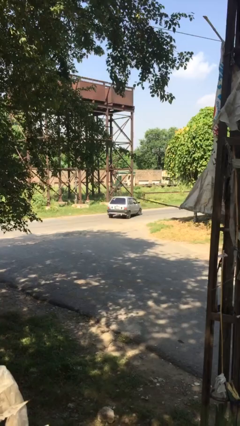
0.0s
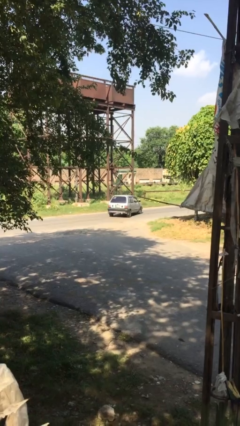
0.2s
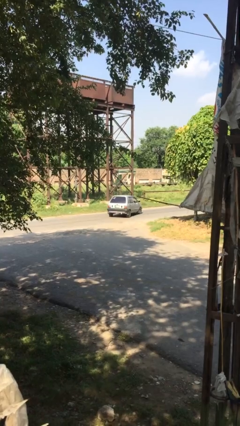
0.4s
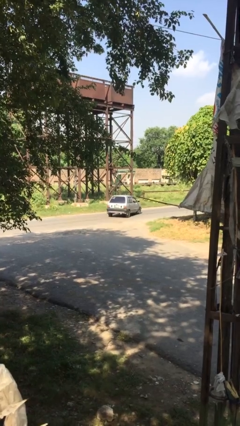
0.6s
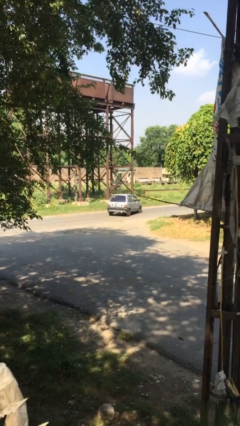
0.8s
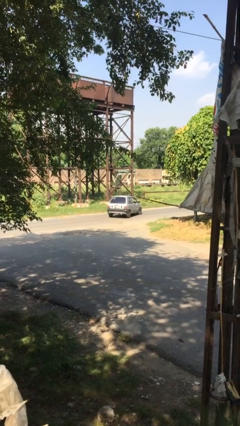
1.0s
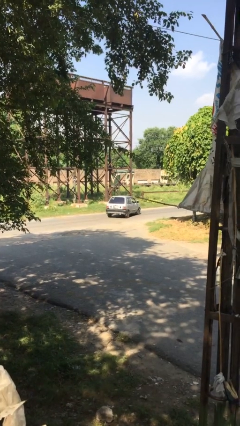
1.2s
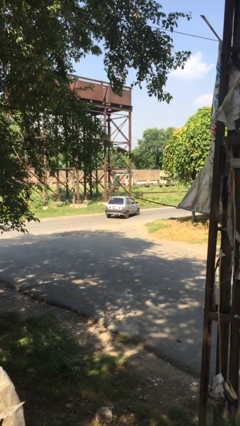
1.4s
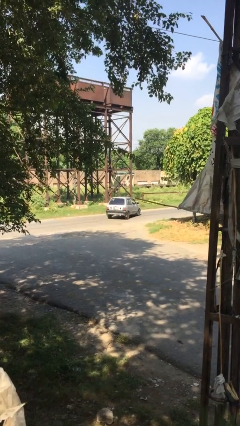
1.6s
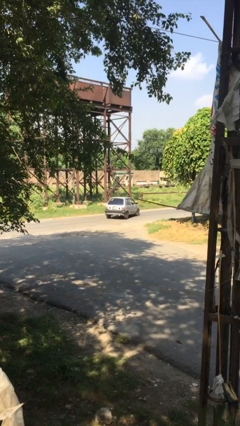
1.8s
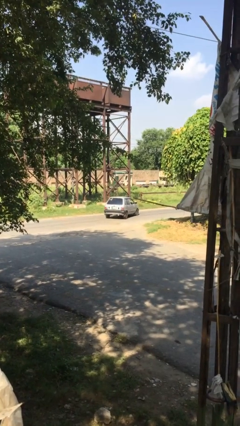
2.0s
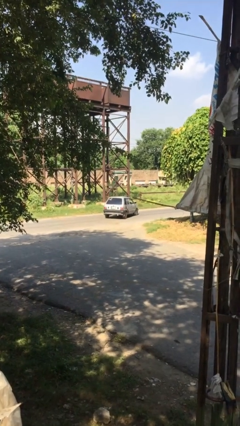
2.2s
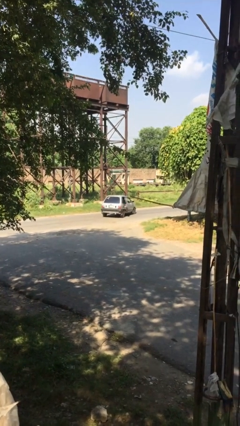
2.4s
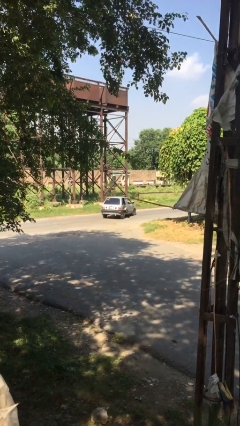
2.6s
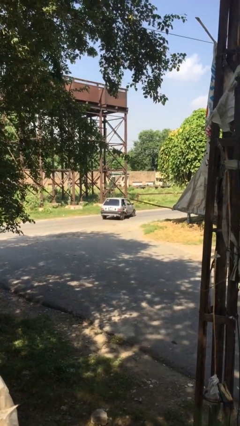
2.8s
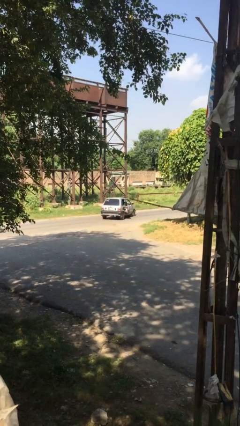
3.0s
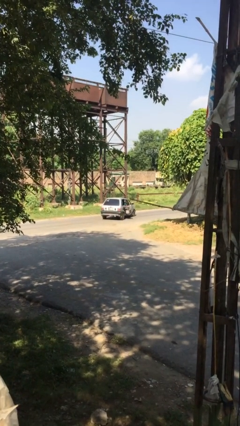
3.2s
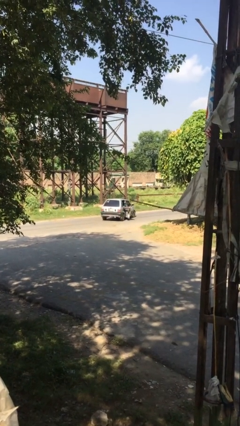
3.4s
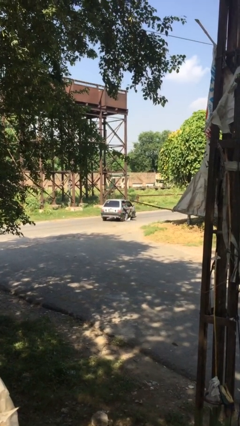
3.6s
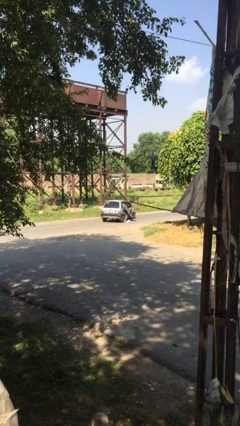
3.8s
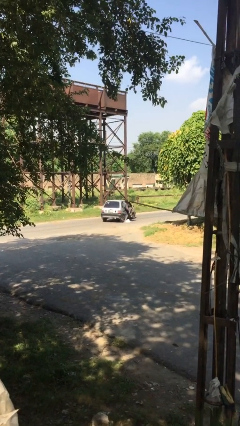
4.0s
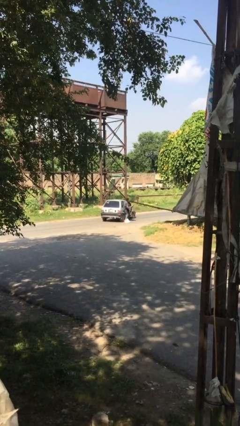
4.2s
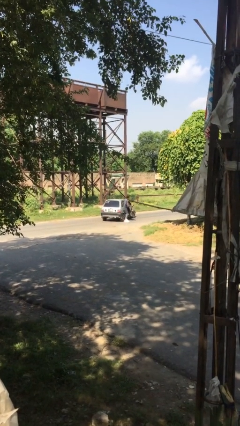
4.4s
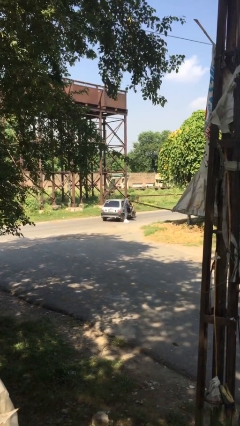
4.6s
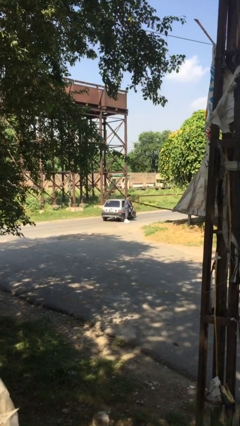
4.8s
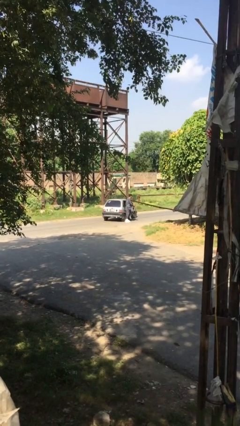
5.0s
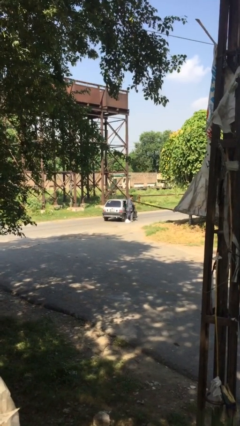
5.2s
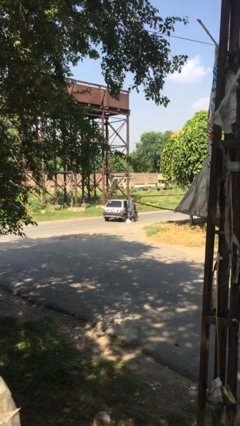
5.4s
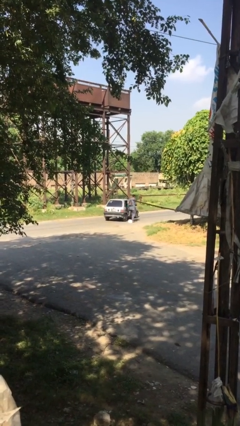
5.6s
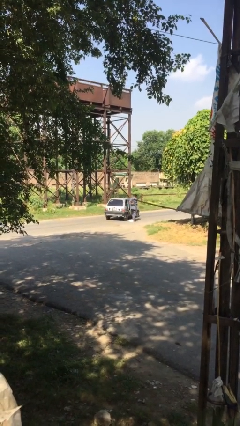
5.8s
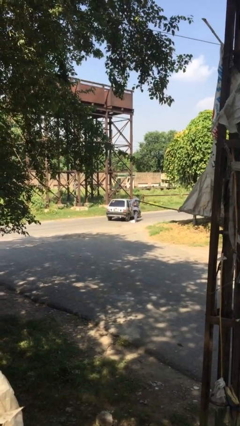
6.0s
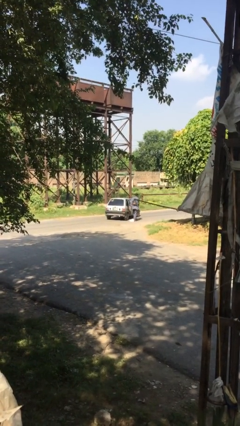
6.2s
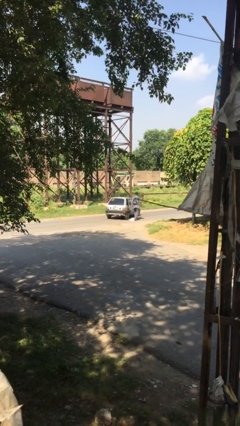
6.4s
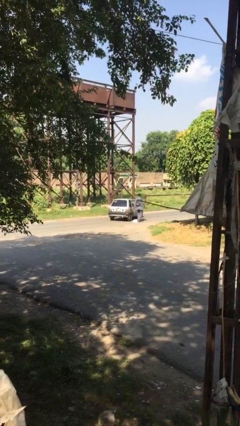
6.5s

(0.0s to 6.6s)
car drops off person

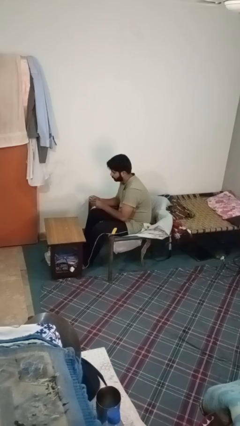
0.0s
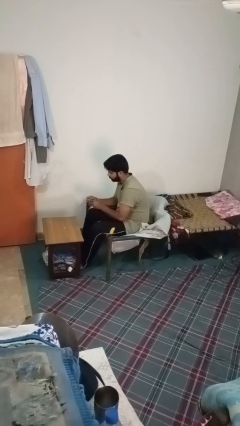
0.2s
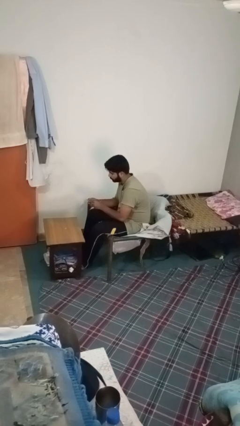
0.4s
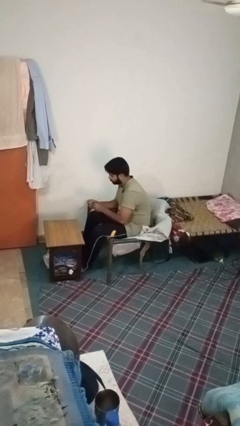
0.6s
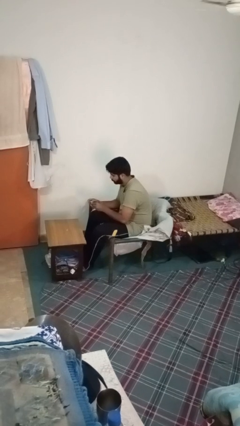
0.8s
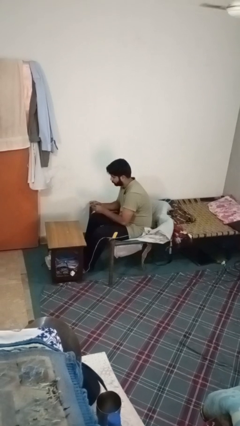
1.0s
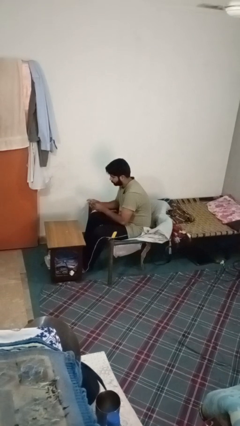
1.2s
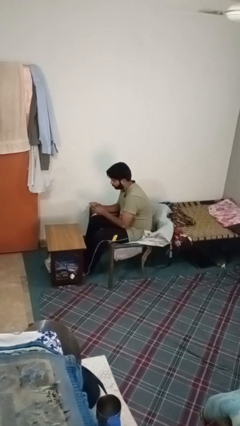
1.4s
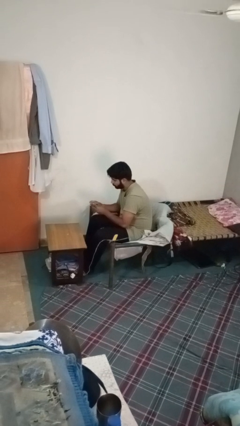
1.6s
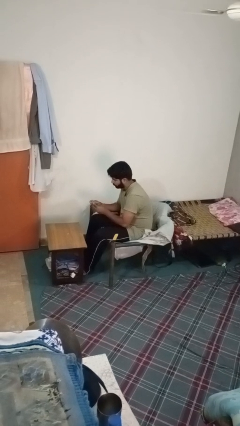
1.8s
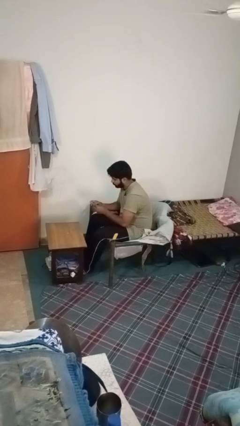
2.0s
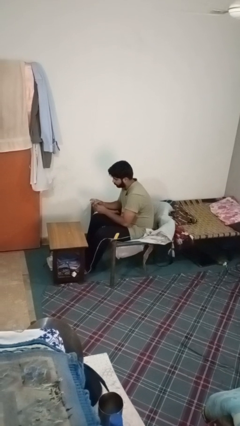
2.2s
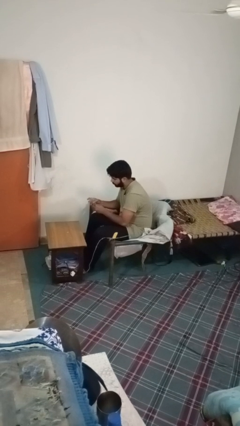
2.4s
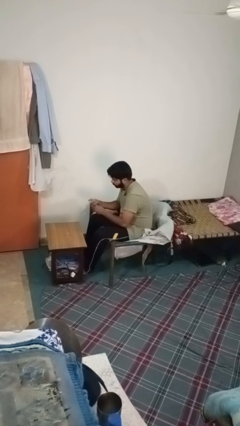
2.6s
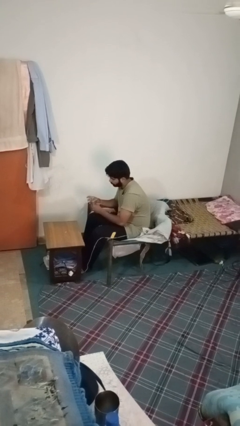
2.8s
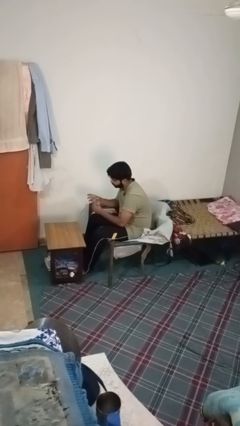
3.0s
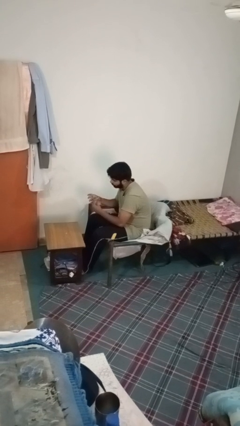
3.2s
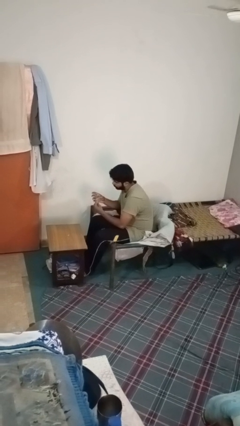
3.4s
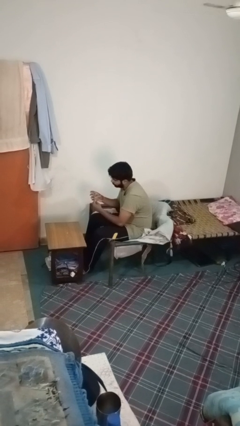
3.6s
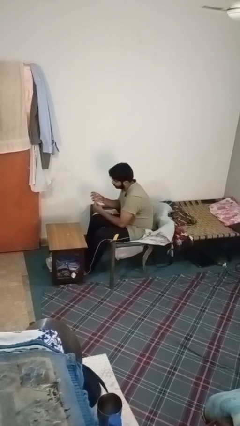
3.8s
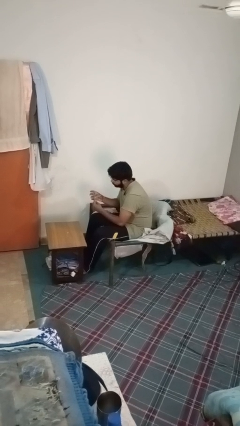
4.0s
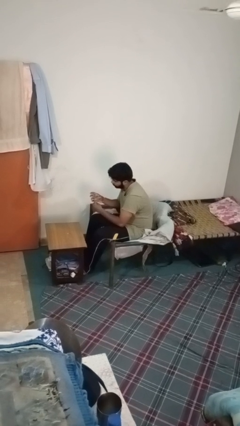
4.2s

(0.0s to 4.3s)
person files fingernails

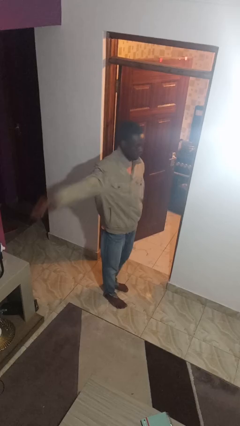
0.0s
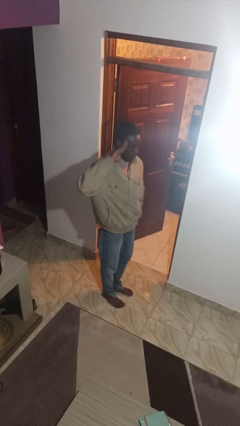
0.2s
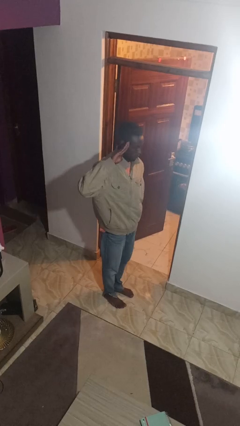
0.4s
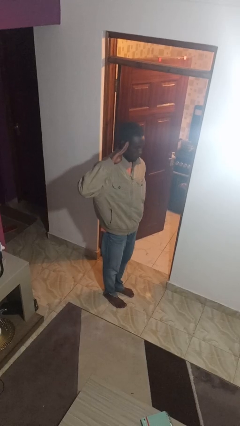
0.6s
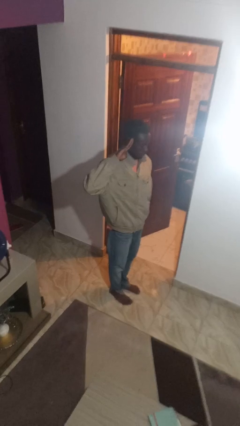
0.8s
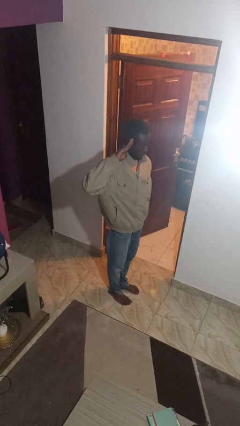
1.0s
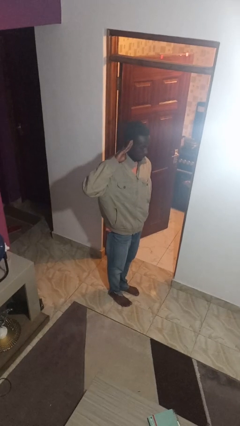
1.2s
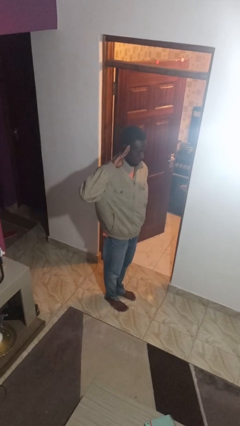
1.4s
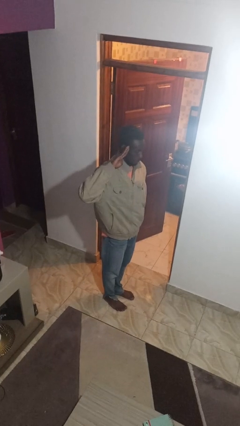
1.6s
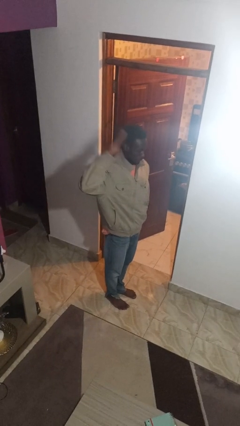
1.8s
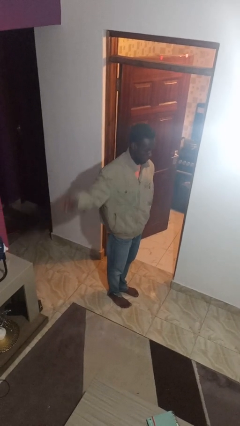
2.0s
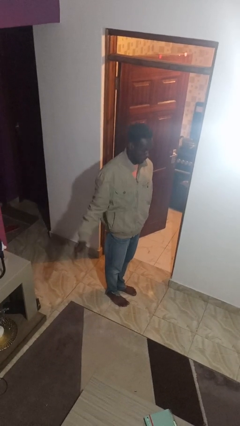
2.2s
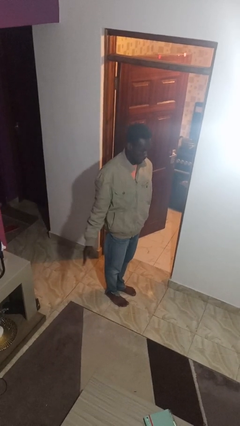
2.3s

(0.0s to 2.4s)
person salutes

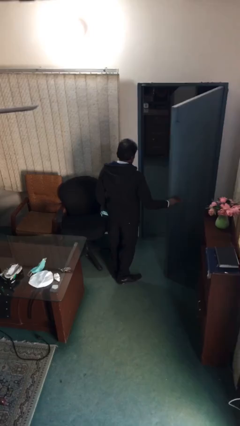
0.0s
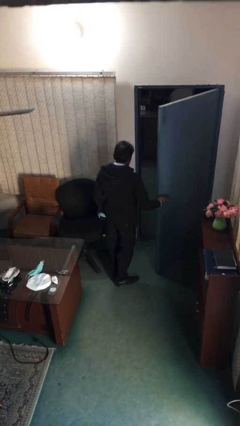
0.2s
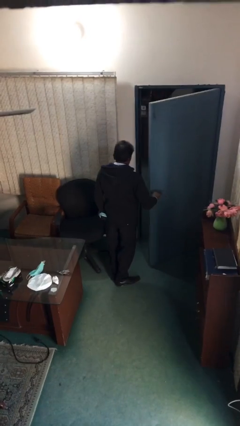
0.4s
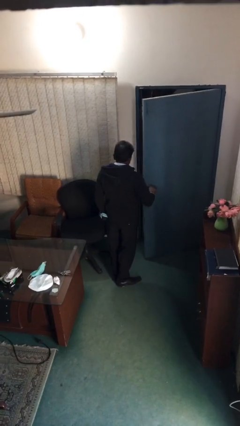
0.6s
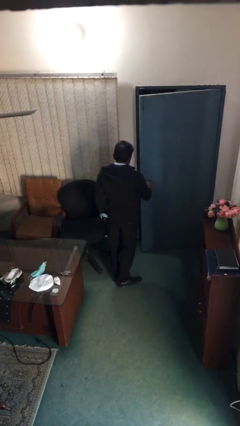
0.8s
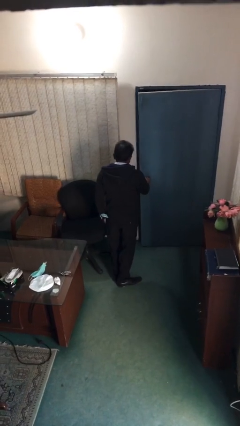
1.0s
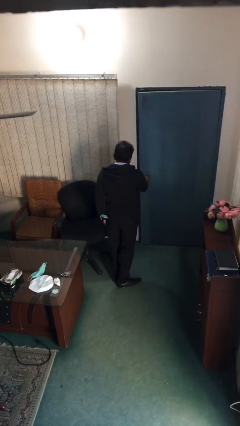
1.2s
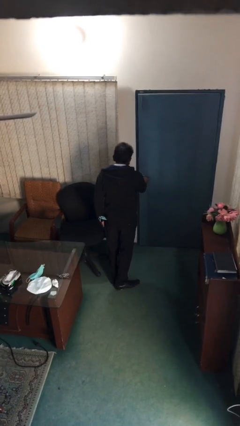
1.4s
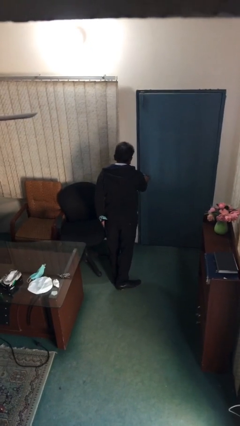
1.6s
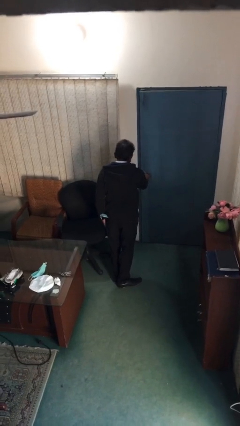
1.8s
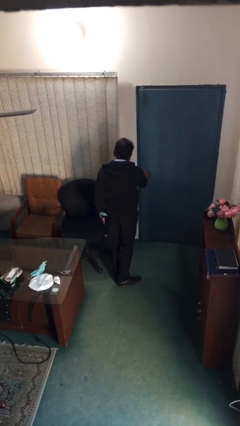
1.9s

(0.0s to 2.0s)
person closes facility door

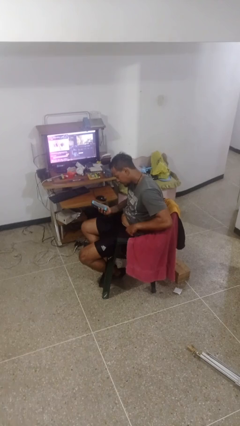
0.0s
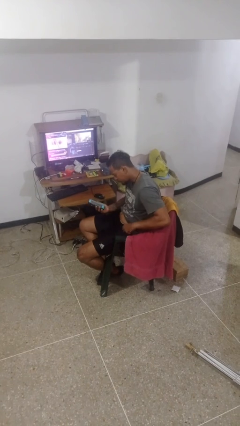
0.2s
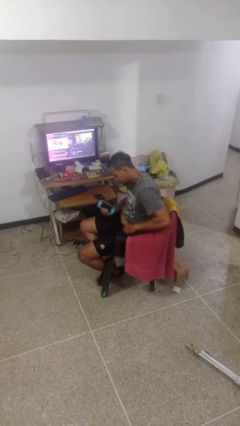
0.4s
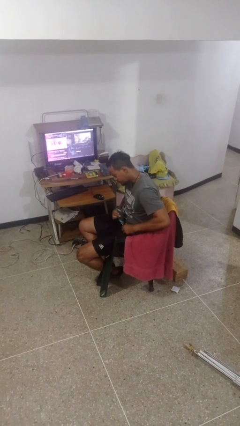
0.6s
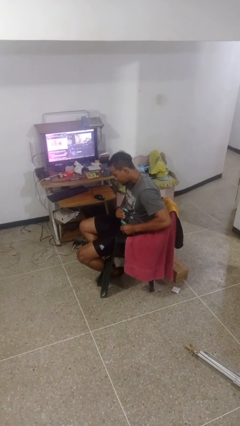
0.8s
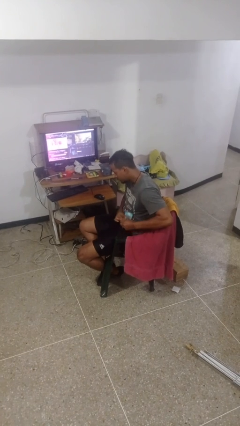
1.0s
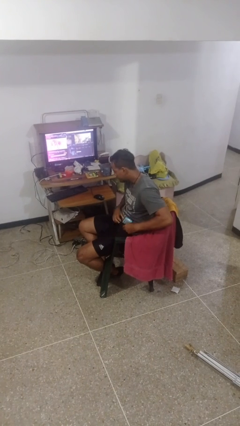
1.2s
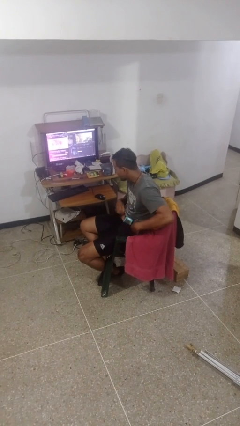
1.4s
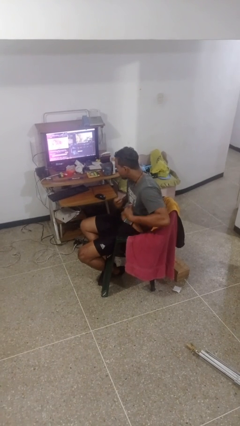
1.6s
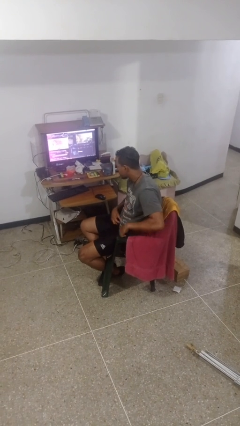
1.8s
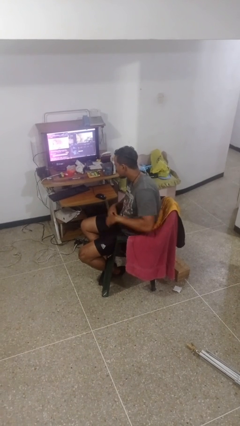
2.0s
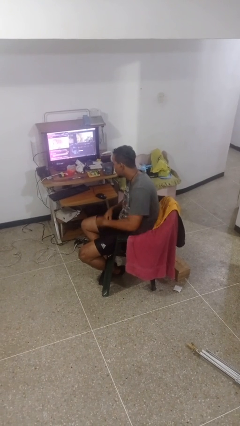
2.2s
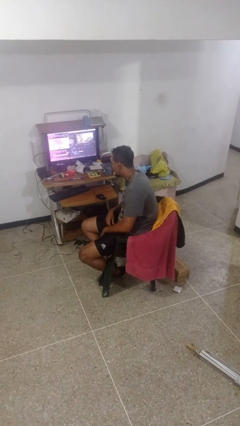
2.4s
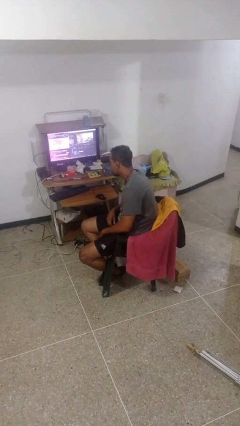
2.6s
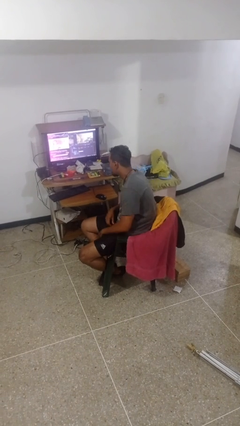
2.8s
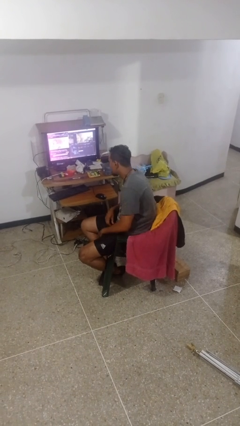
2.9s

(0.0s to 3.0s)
person puts phone into pocket
